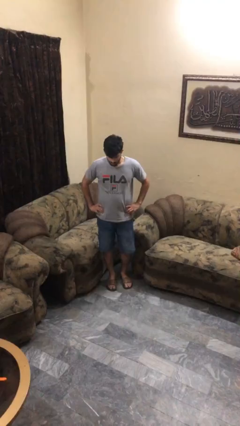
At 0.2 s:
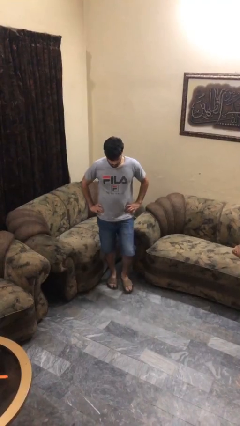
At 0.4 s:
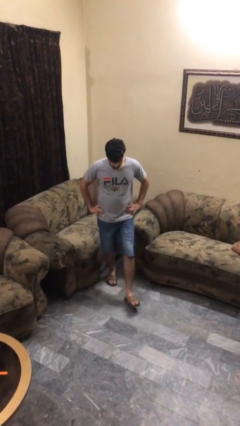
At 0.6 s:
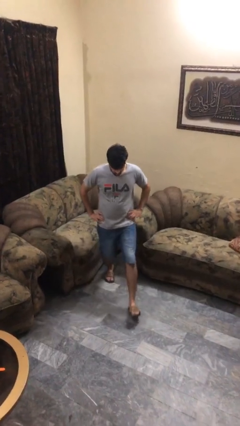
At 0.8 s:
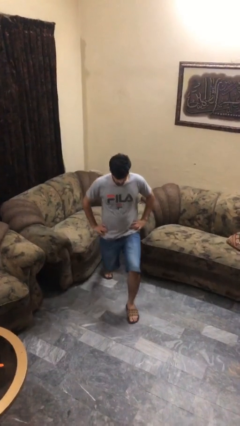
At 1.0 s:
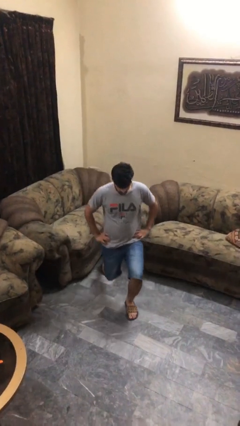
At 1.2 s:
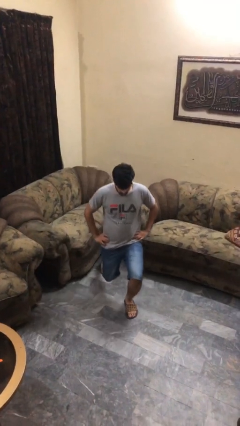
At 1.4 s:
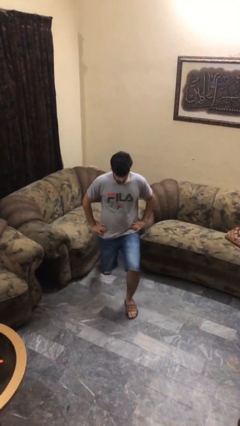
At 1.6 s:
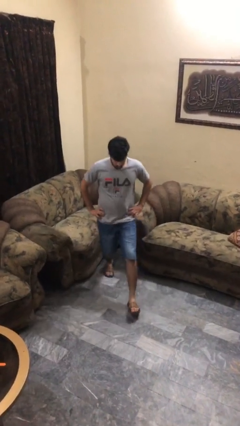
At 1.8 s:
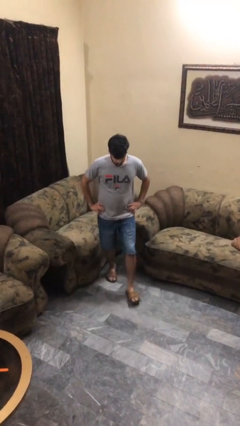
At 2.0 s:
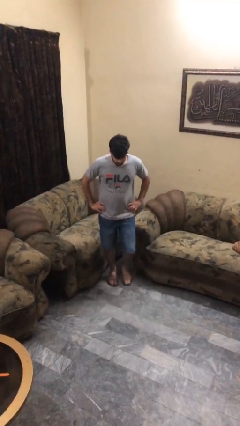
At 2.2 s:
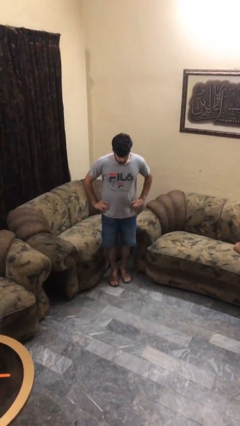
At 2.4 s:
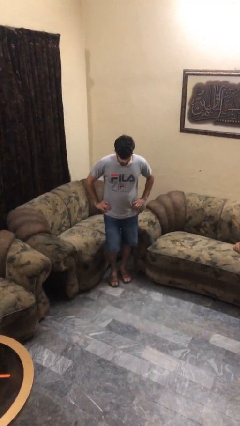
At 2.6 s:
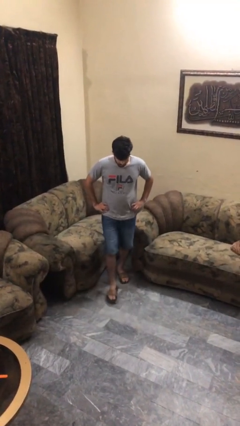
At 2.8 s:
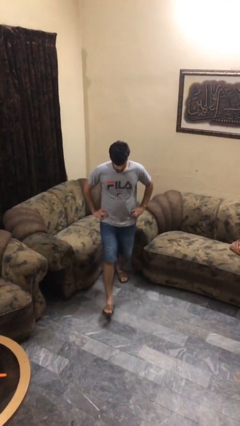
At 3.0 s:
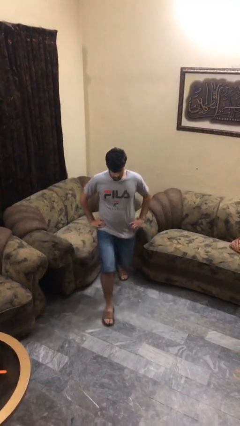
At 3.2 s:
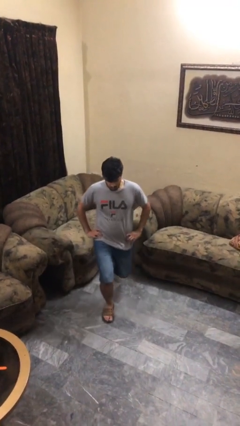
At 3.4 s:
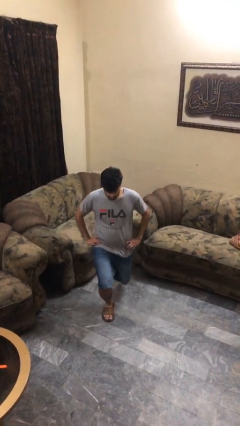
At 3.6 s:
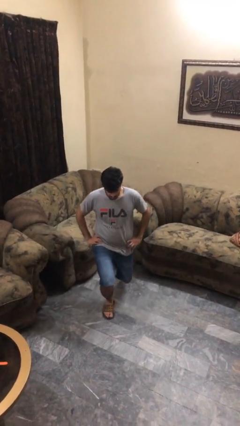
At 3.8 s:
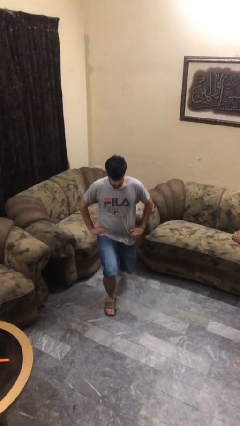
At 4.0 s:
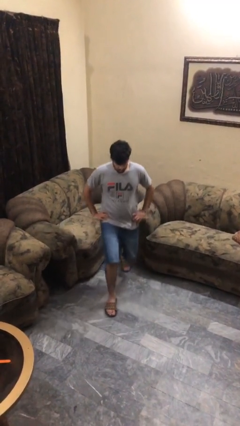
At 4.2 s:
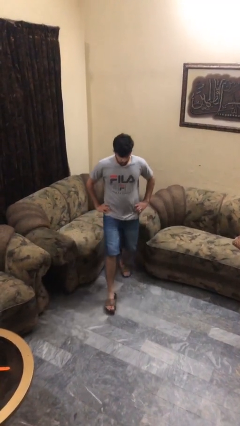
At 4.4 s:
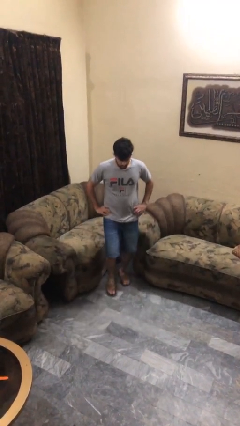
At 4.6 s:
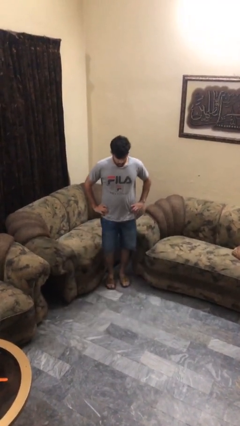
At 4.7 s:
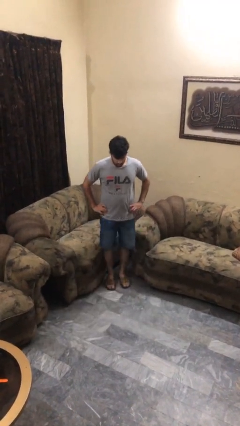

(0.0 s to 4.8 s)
person exercises with lunges

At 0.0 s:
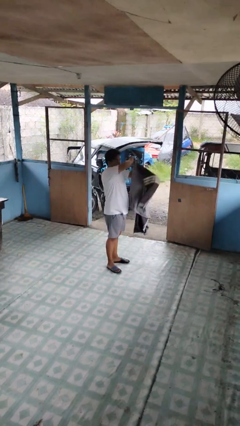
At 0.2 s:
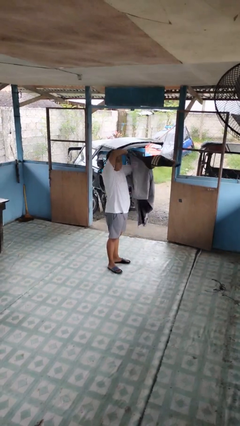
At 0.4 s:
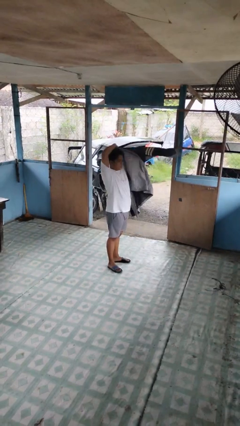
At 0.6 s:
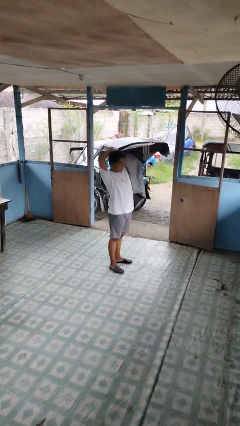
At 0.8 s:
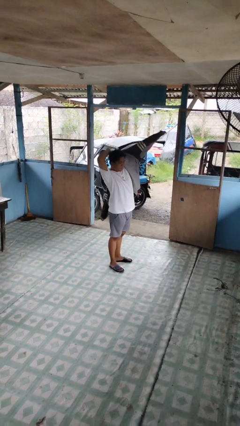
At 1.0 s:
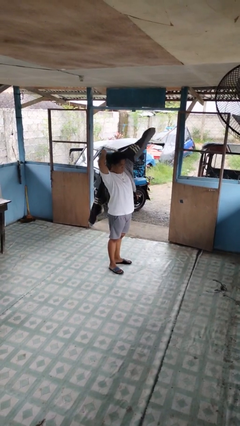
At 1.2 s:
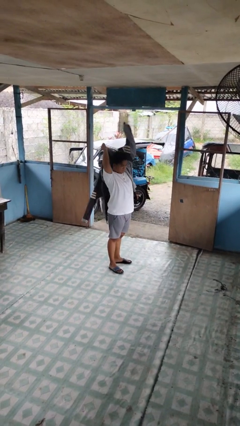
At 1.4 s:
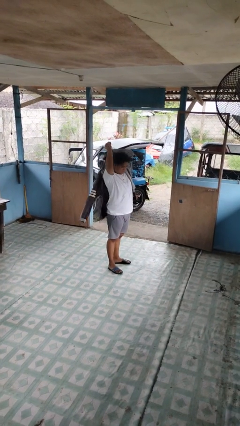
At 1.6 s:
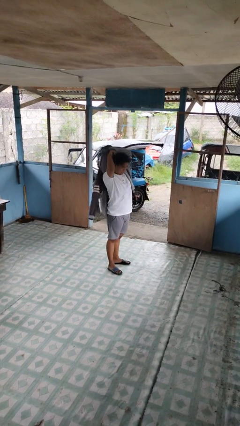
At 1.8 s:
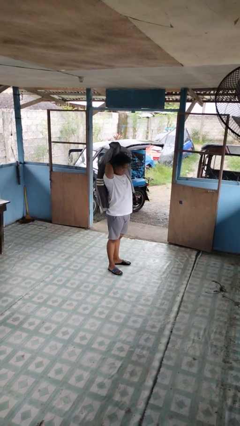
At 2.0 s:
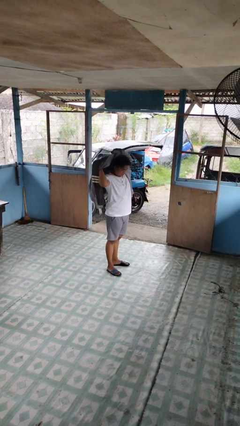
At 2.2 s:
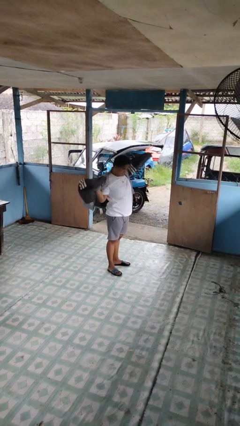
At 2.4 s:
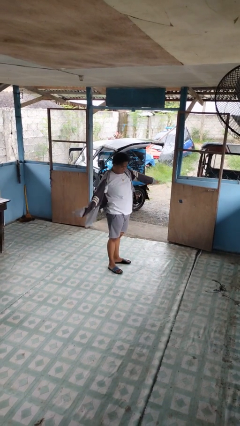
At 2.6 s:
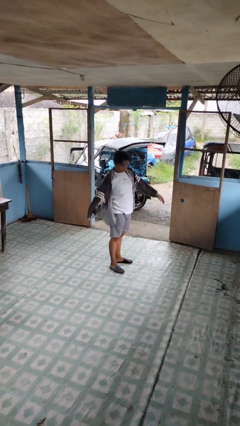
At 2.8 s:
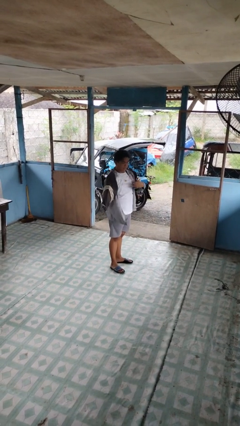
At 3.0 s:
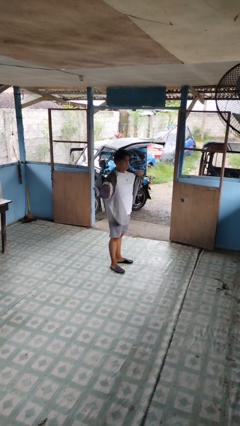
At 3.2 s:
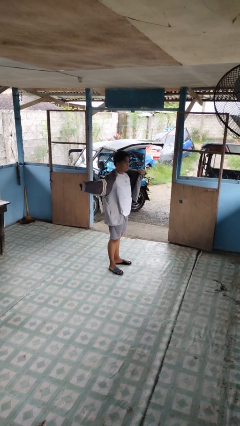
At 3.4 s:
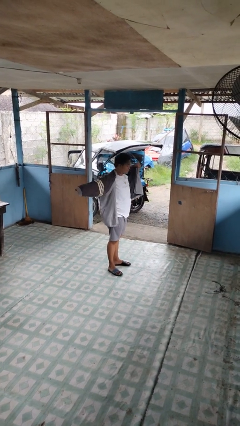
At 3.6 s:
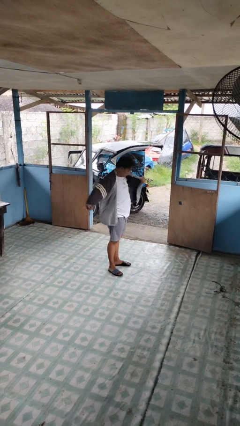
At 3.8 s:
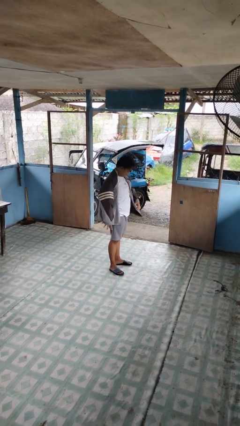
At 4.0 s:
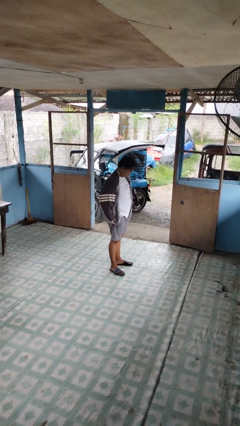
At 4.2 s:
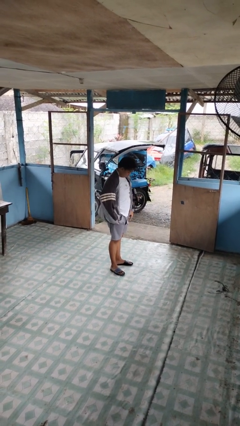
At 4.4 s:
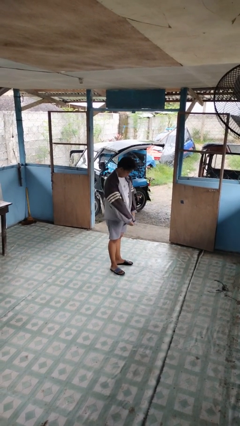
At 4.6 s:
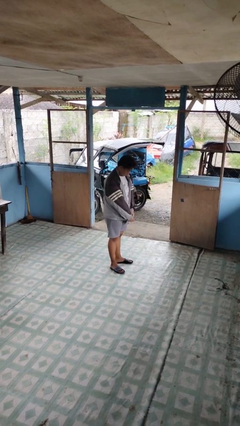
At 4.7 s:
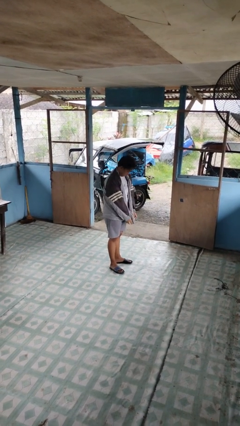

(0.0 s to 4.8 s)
person puts on jacket

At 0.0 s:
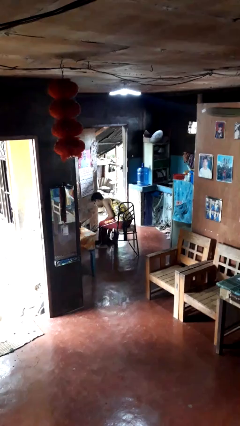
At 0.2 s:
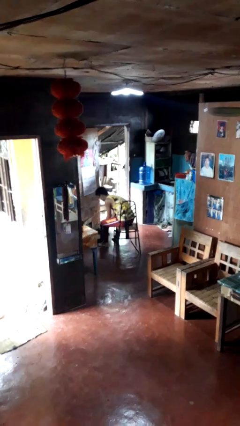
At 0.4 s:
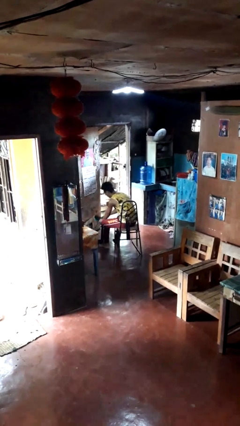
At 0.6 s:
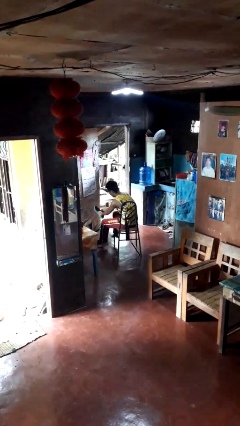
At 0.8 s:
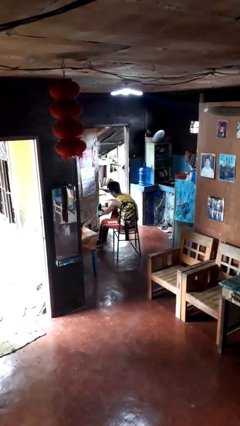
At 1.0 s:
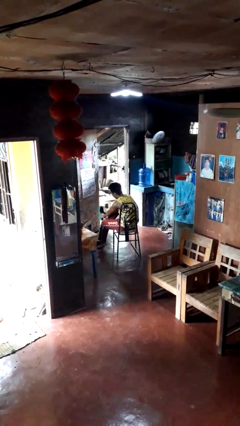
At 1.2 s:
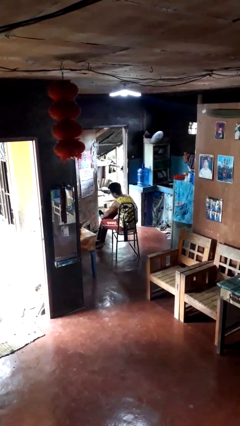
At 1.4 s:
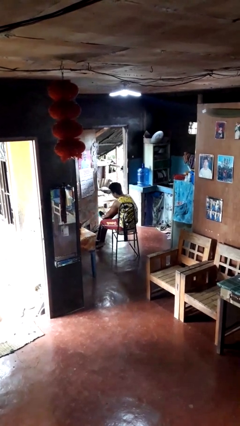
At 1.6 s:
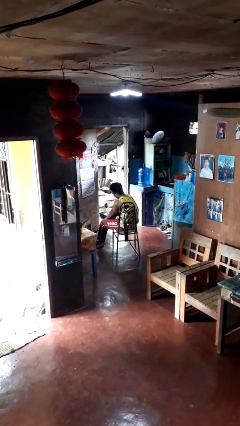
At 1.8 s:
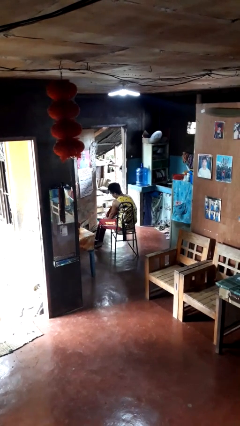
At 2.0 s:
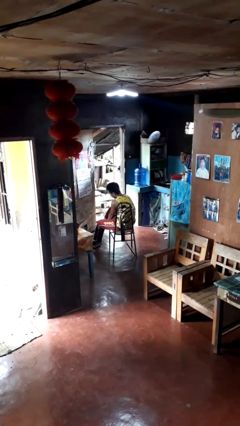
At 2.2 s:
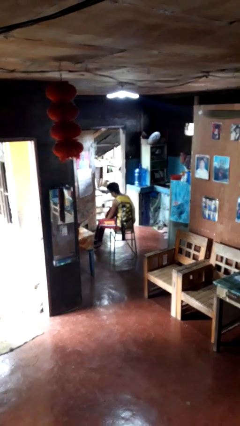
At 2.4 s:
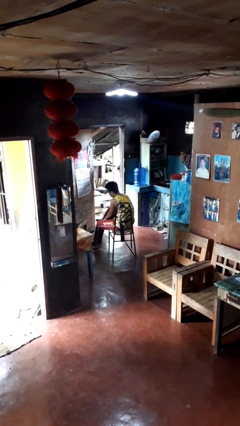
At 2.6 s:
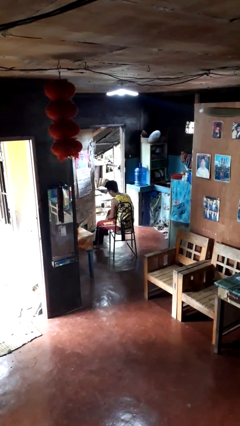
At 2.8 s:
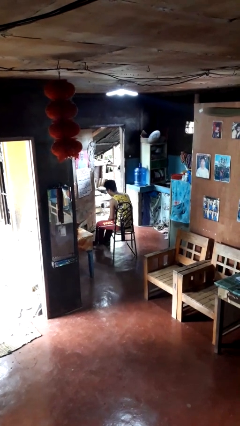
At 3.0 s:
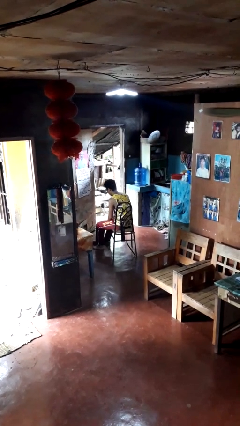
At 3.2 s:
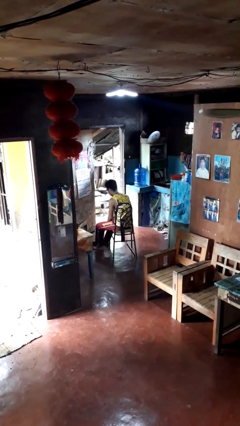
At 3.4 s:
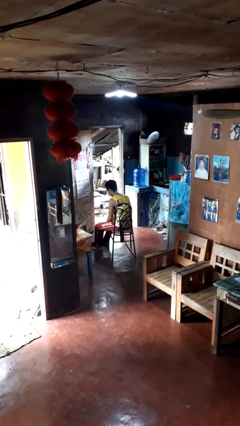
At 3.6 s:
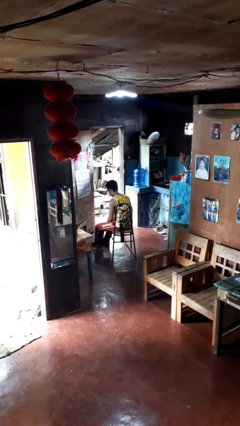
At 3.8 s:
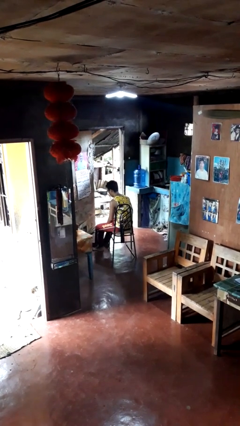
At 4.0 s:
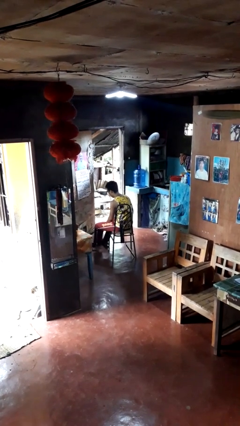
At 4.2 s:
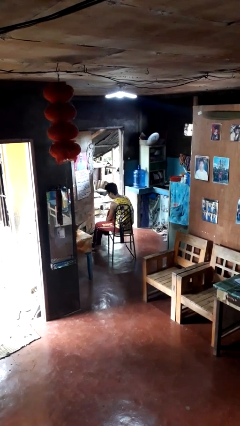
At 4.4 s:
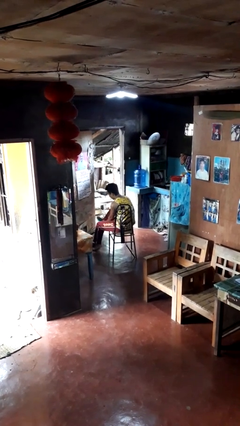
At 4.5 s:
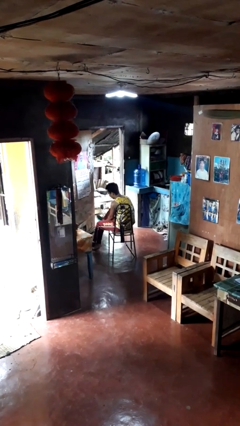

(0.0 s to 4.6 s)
person puts on shoes

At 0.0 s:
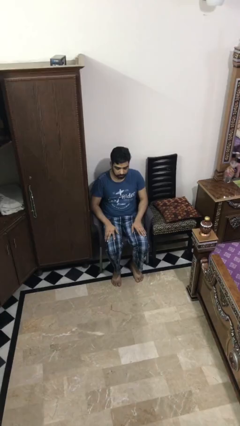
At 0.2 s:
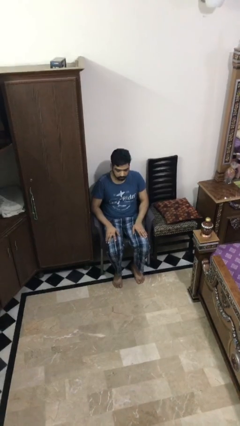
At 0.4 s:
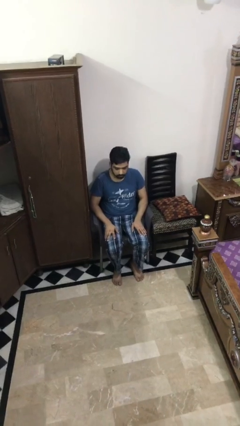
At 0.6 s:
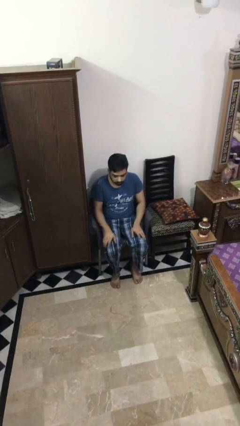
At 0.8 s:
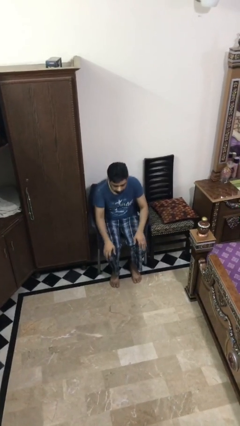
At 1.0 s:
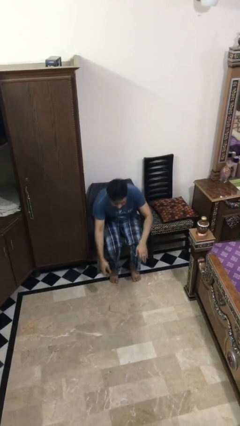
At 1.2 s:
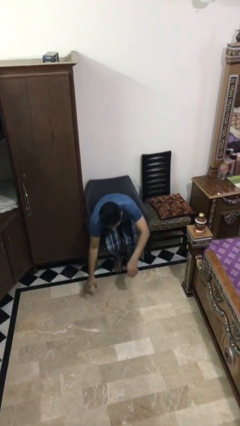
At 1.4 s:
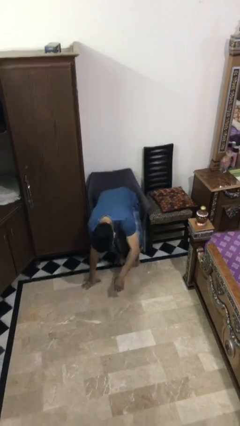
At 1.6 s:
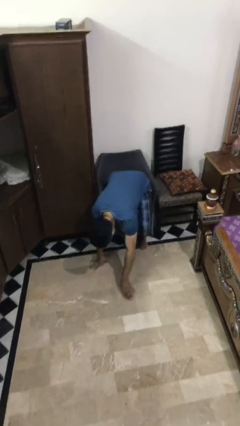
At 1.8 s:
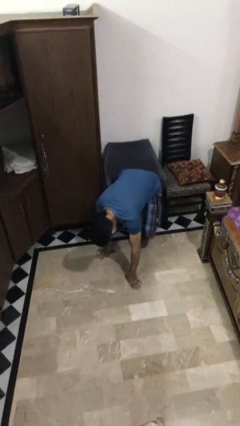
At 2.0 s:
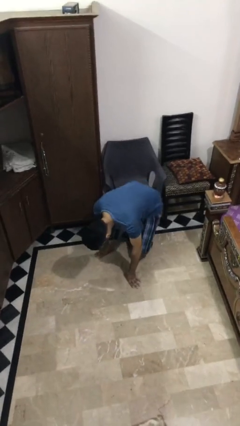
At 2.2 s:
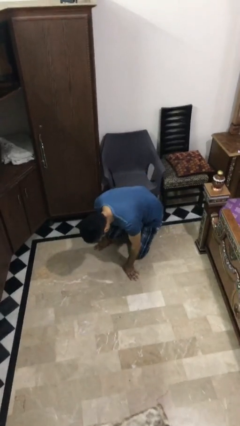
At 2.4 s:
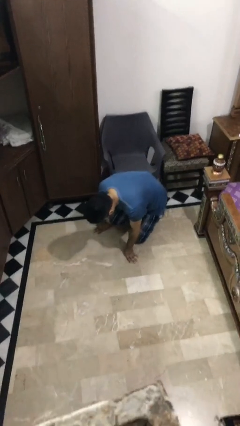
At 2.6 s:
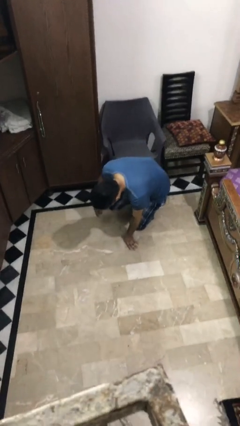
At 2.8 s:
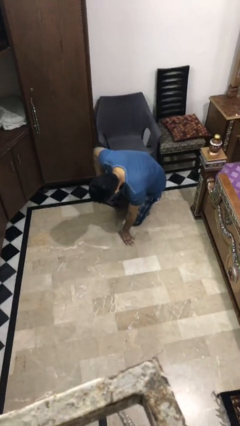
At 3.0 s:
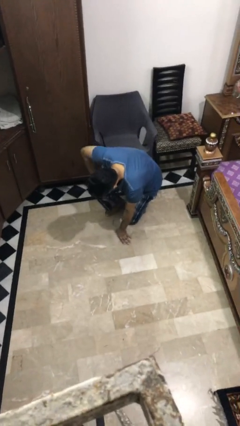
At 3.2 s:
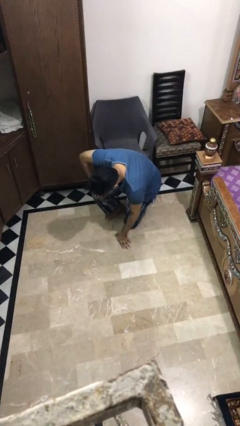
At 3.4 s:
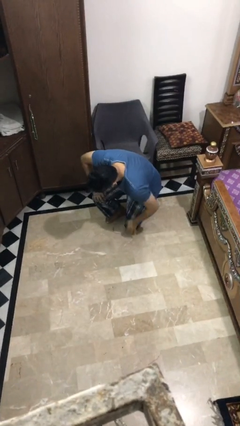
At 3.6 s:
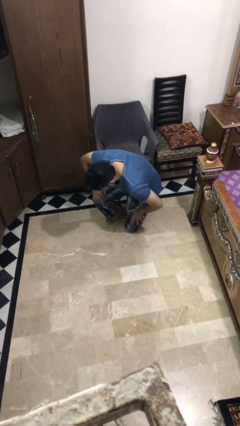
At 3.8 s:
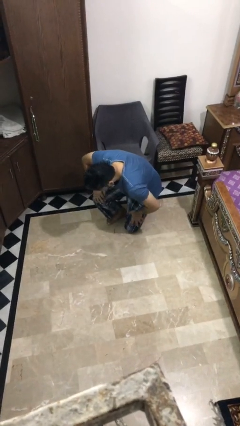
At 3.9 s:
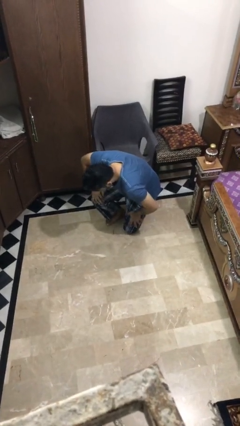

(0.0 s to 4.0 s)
person falls from chair
